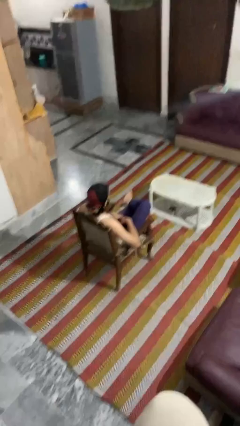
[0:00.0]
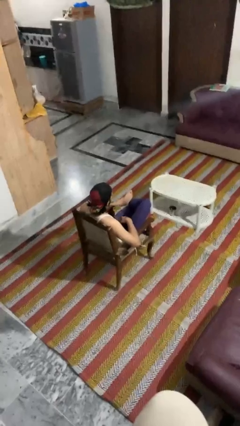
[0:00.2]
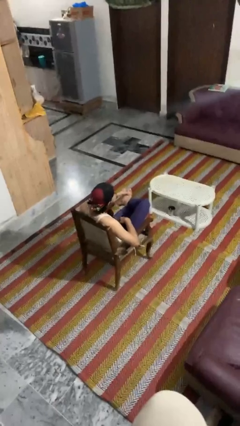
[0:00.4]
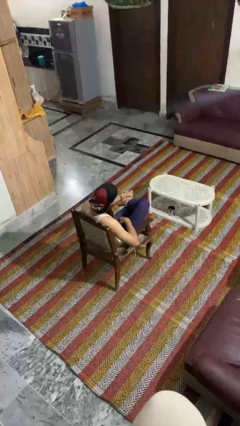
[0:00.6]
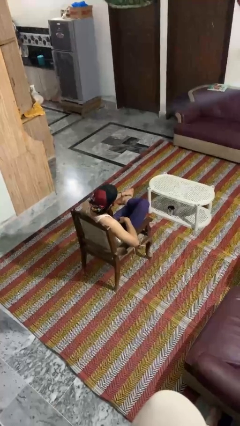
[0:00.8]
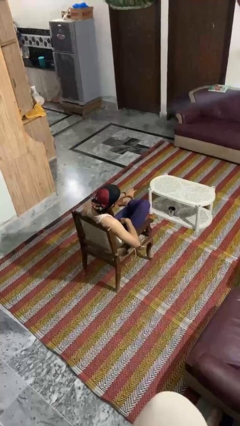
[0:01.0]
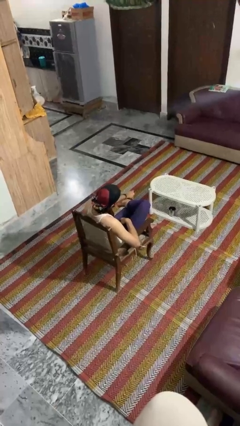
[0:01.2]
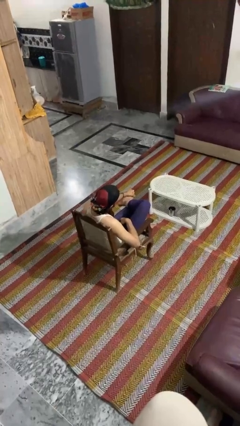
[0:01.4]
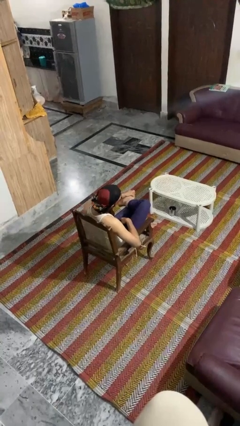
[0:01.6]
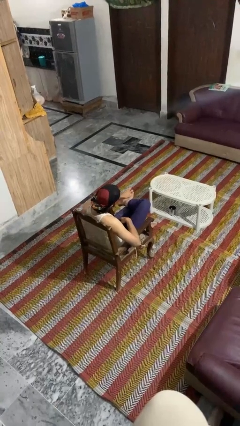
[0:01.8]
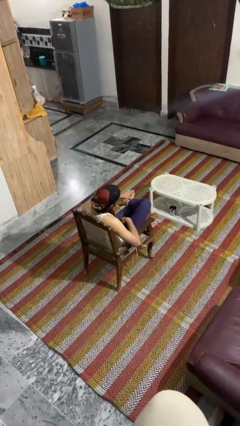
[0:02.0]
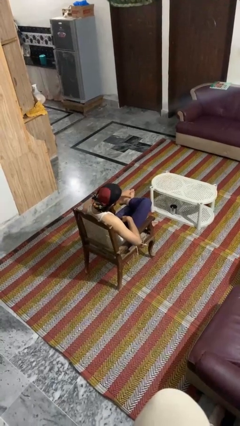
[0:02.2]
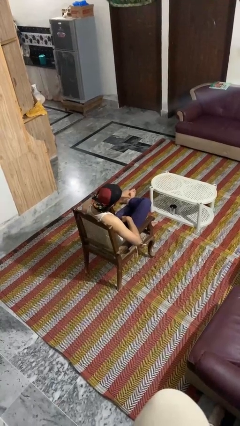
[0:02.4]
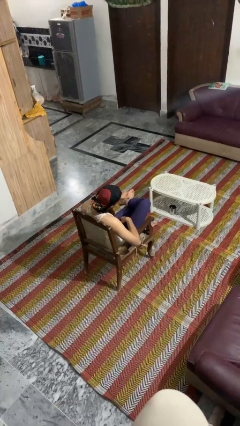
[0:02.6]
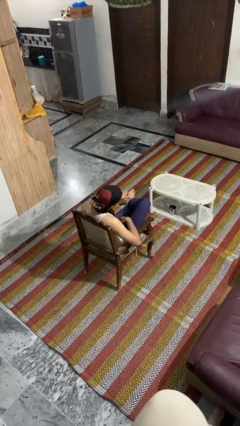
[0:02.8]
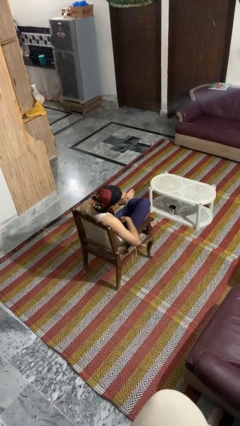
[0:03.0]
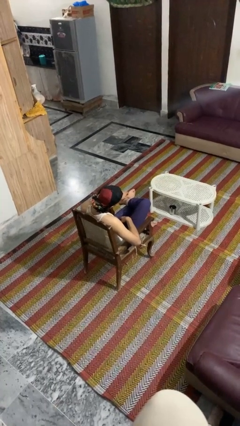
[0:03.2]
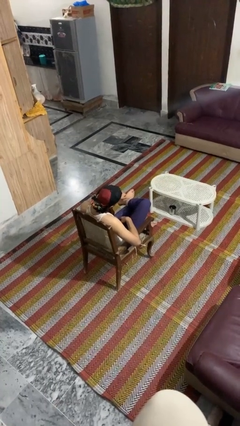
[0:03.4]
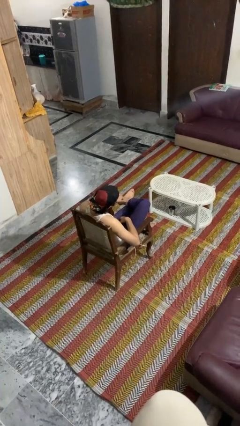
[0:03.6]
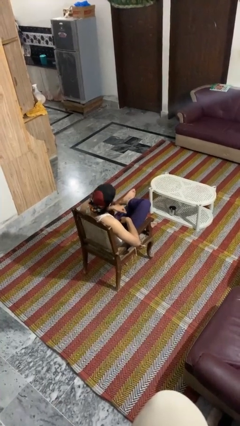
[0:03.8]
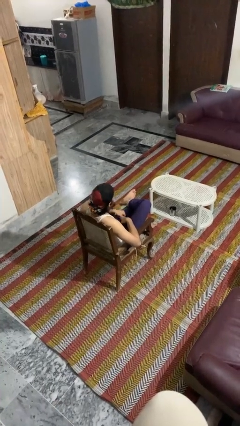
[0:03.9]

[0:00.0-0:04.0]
person rubs foot

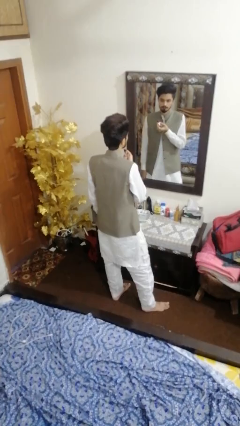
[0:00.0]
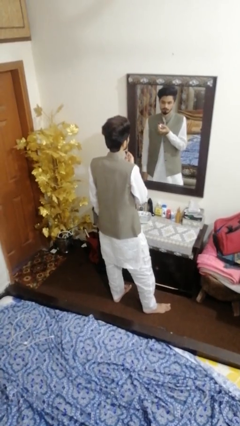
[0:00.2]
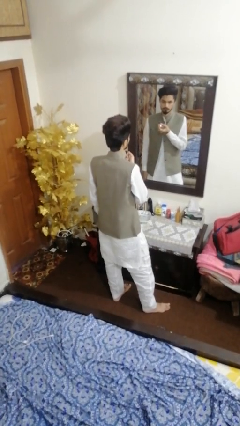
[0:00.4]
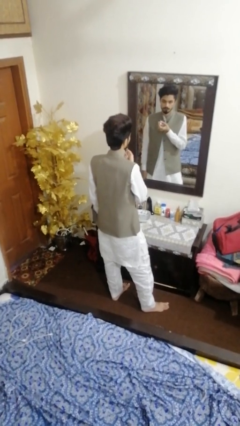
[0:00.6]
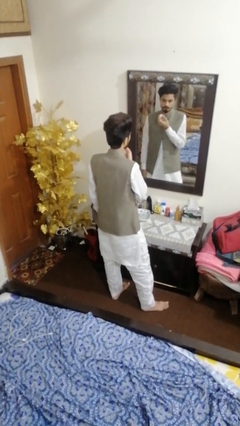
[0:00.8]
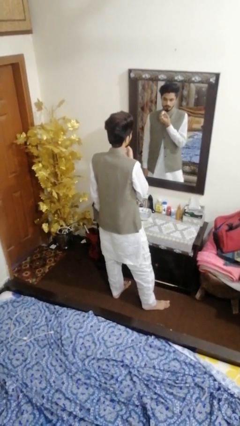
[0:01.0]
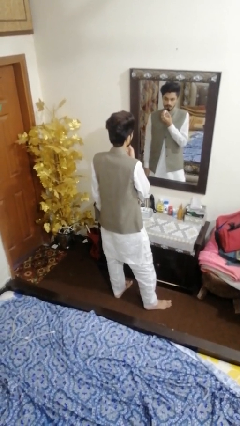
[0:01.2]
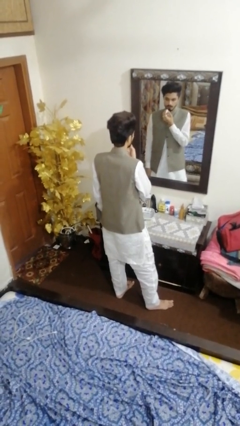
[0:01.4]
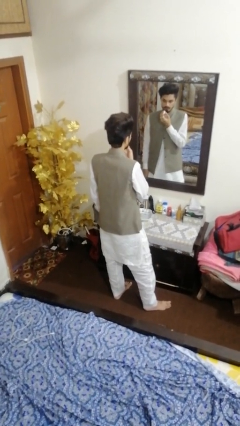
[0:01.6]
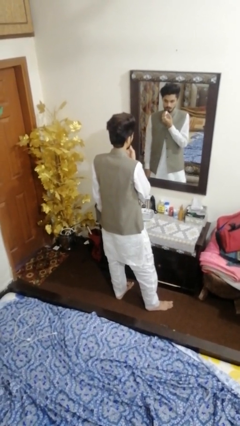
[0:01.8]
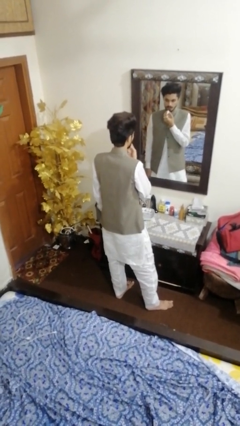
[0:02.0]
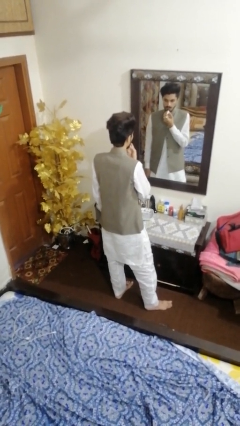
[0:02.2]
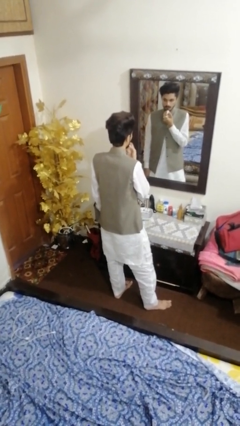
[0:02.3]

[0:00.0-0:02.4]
person applies lip makeup

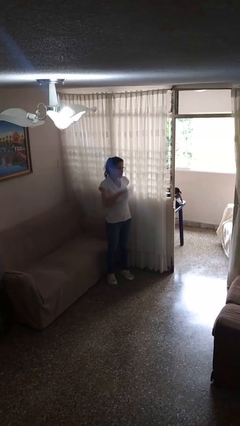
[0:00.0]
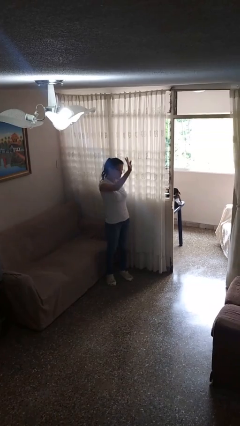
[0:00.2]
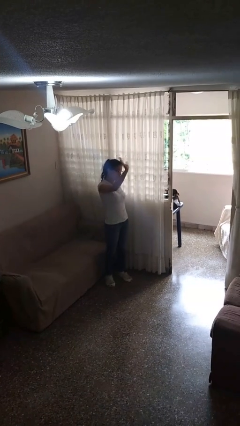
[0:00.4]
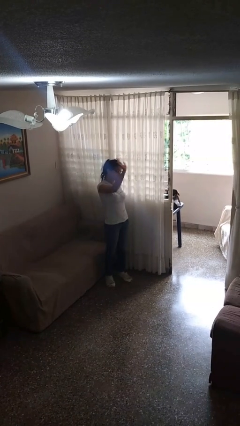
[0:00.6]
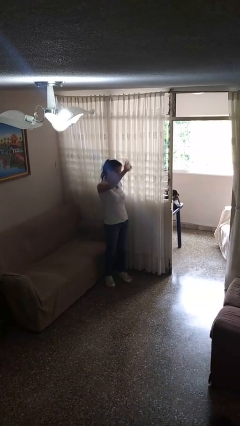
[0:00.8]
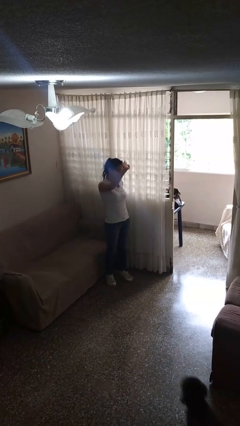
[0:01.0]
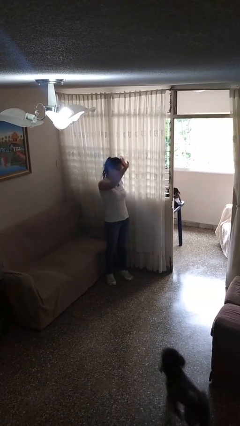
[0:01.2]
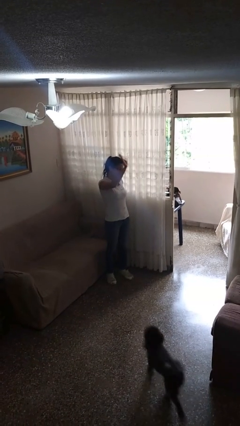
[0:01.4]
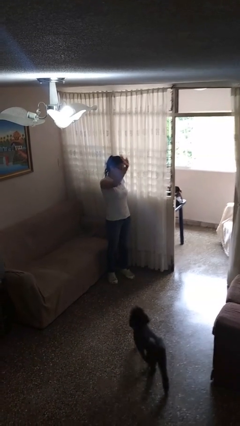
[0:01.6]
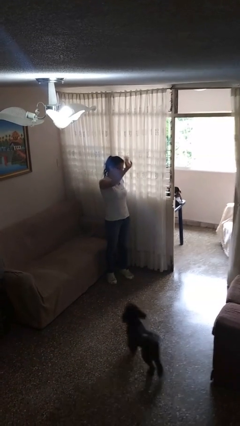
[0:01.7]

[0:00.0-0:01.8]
person waves at person

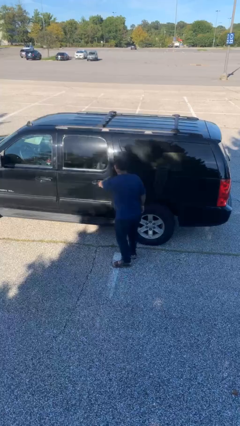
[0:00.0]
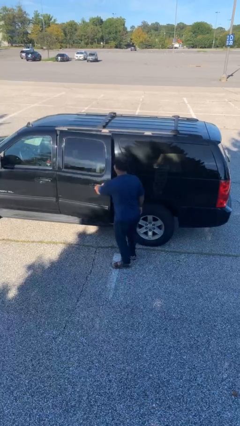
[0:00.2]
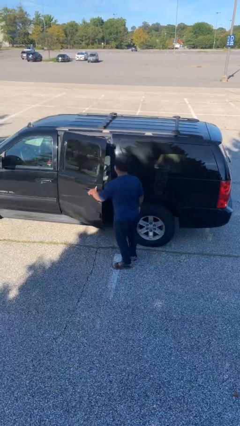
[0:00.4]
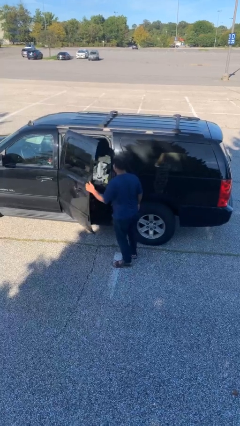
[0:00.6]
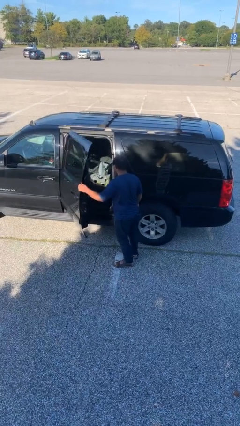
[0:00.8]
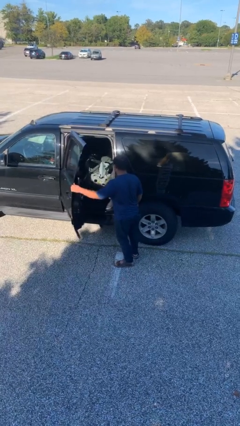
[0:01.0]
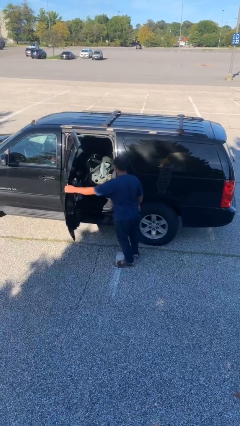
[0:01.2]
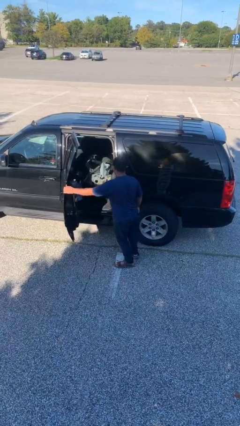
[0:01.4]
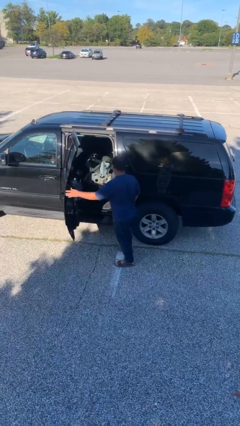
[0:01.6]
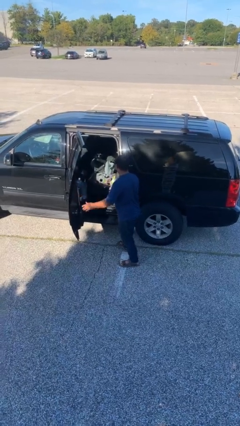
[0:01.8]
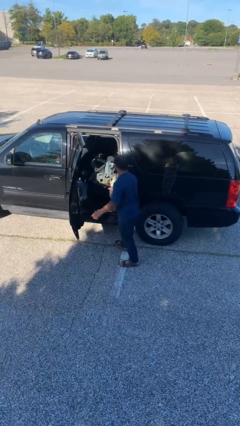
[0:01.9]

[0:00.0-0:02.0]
person opens car door

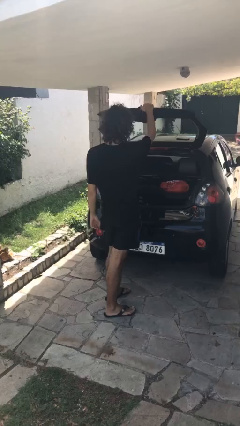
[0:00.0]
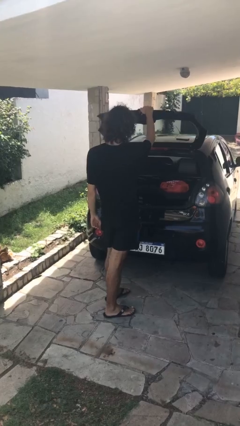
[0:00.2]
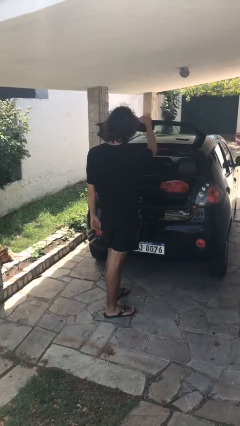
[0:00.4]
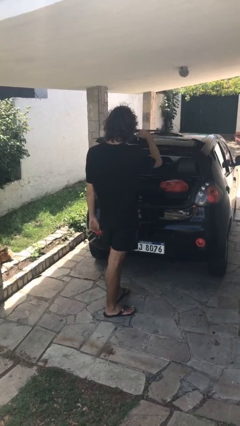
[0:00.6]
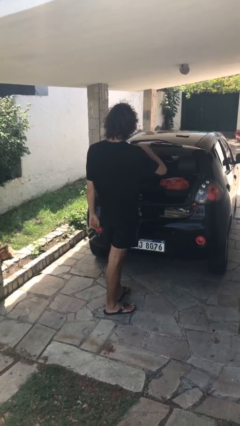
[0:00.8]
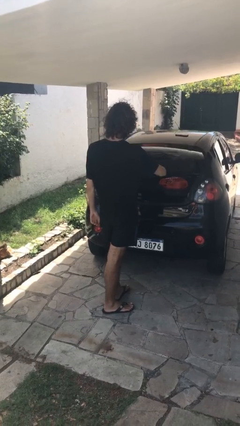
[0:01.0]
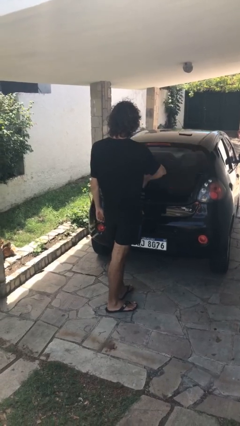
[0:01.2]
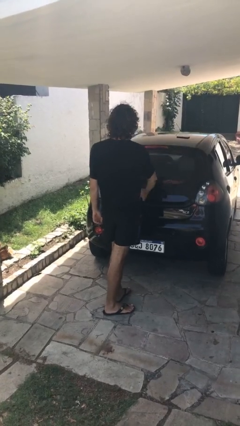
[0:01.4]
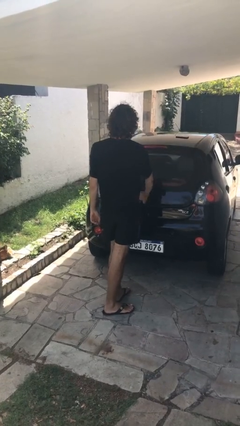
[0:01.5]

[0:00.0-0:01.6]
person closes car trunk

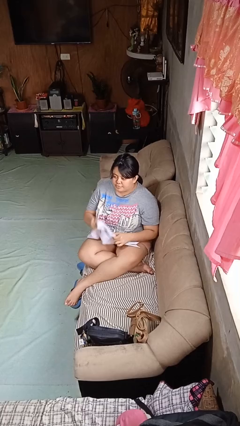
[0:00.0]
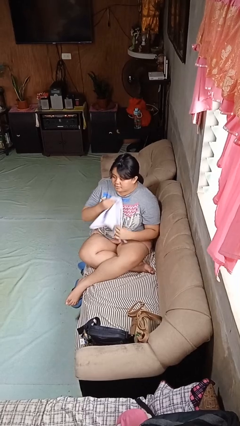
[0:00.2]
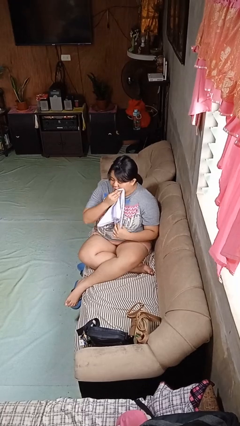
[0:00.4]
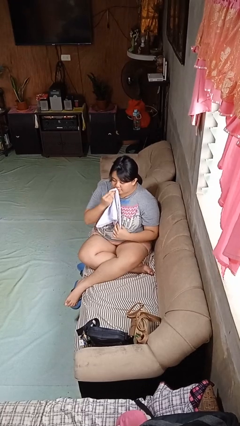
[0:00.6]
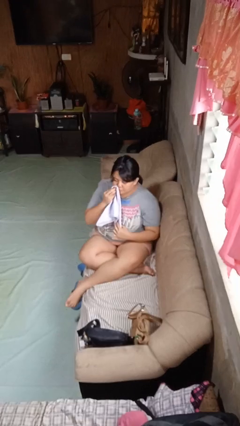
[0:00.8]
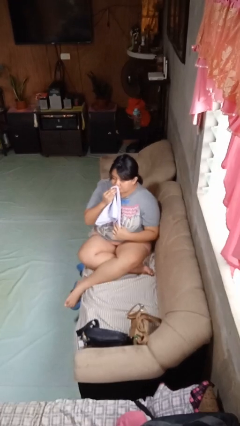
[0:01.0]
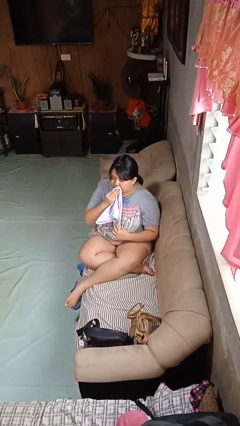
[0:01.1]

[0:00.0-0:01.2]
person wipes mouth with napkin

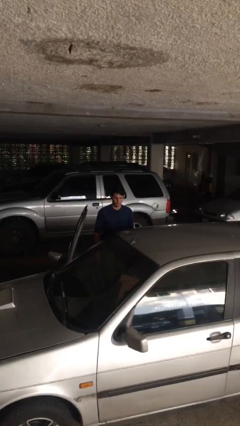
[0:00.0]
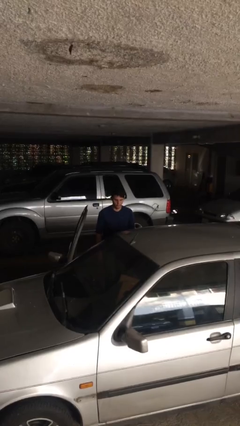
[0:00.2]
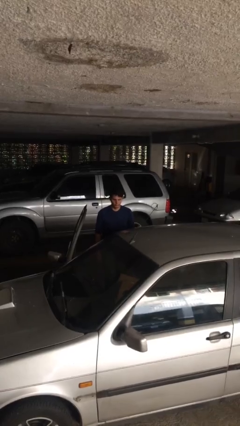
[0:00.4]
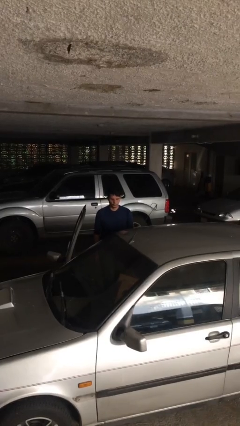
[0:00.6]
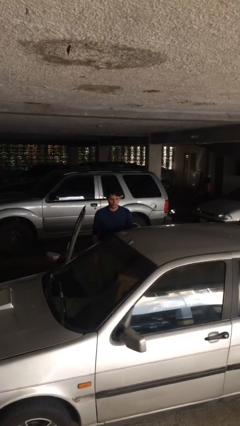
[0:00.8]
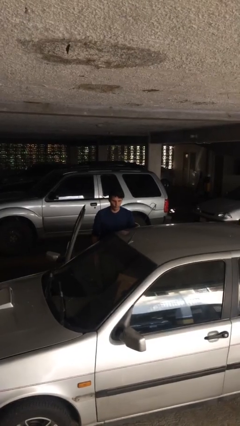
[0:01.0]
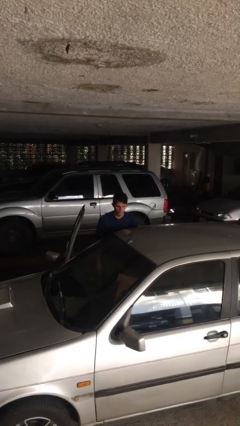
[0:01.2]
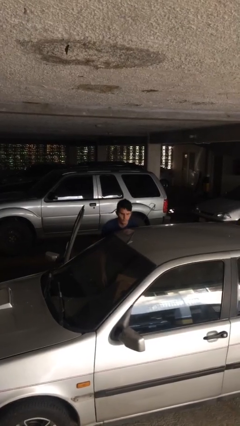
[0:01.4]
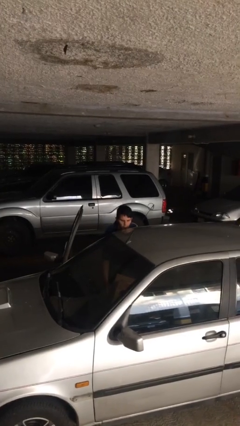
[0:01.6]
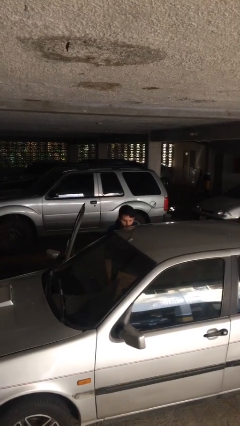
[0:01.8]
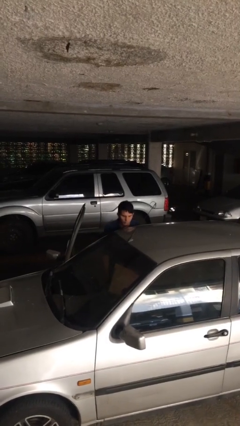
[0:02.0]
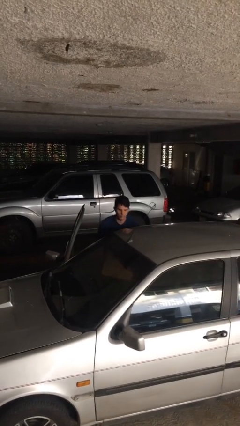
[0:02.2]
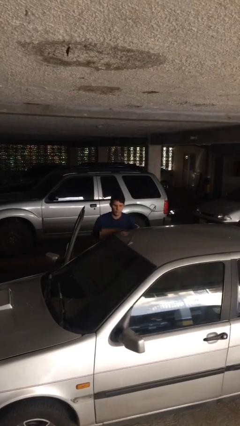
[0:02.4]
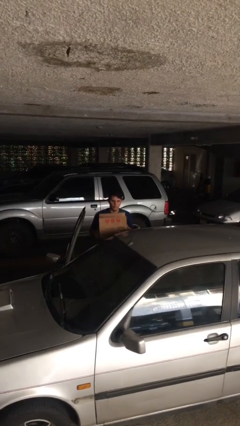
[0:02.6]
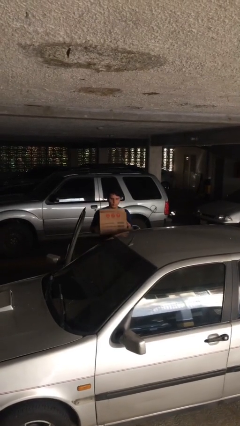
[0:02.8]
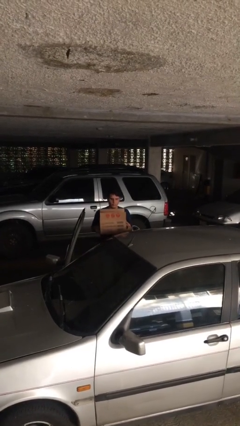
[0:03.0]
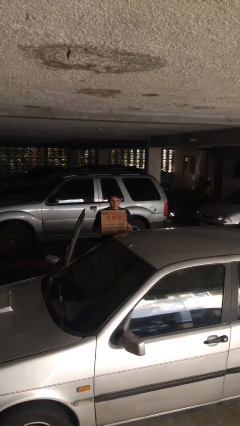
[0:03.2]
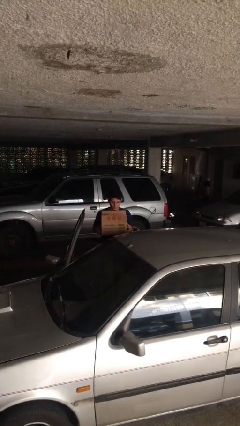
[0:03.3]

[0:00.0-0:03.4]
person unloads car

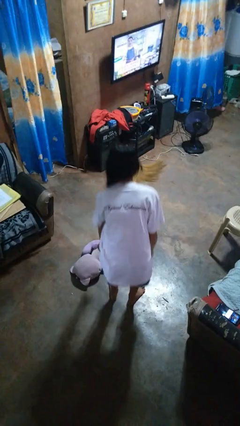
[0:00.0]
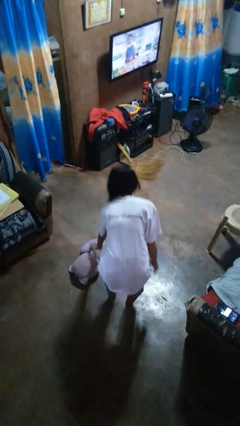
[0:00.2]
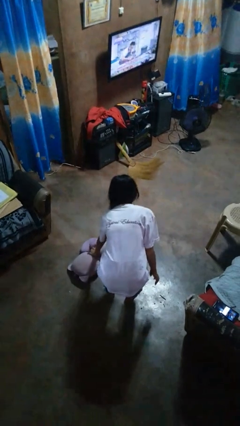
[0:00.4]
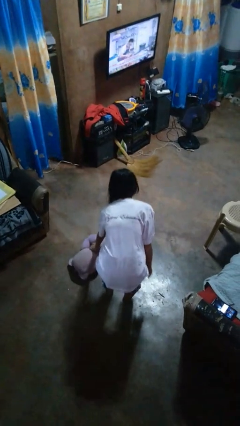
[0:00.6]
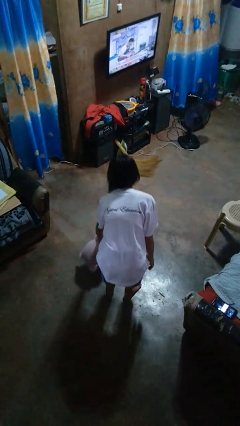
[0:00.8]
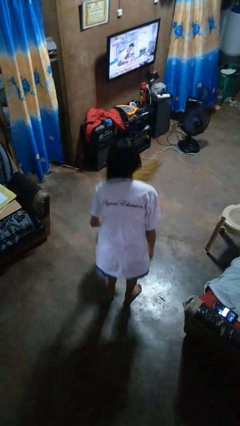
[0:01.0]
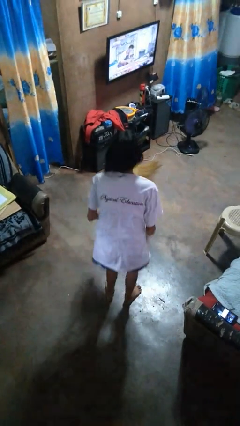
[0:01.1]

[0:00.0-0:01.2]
person picks up object from floor
